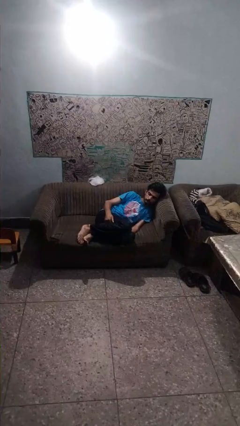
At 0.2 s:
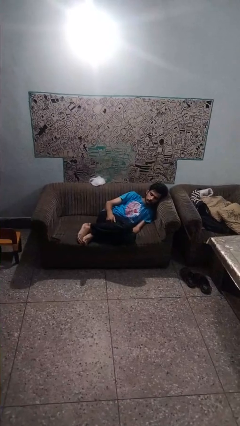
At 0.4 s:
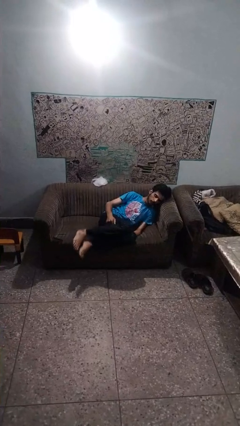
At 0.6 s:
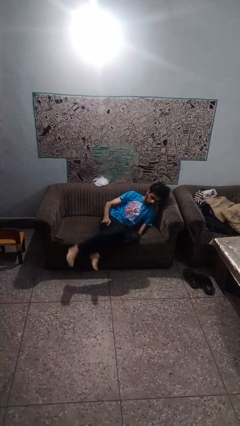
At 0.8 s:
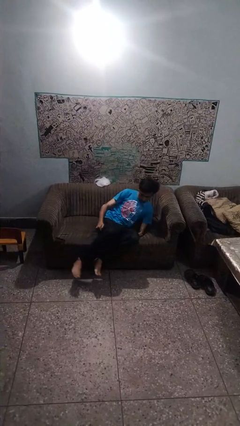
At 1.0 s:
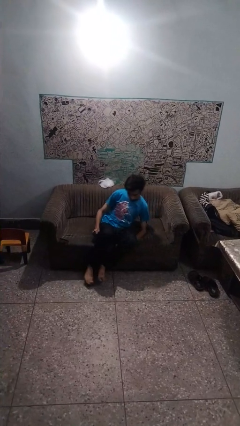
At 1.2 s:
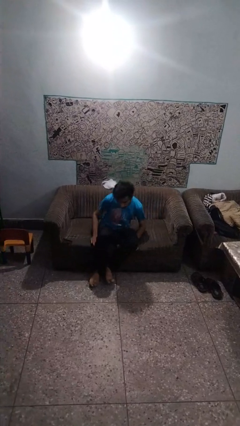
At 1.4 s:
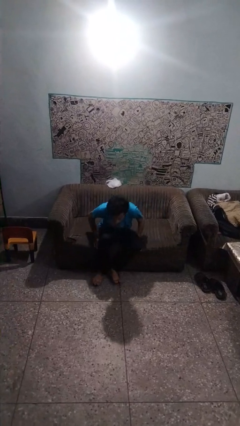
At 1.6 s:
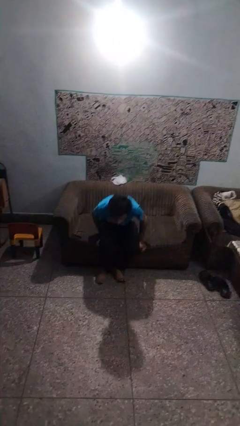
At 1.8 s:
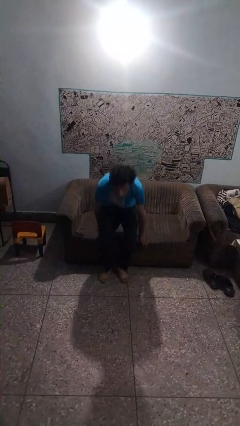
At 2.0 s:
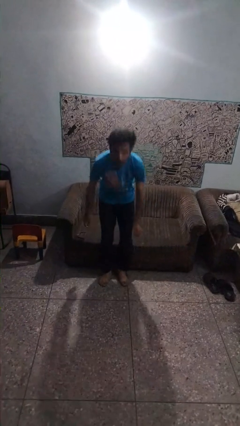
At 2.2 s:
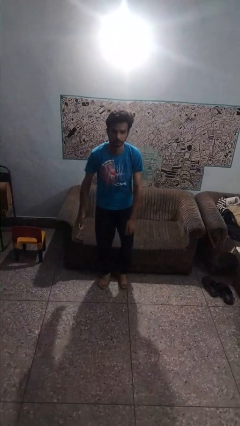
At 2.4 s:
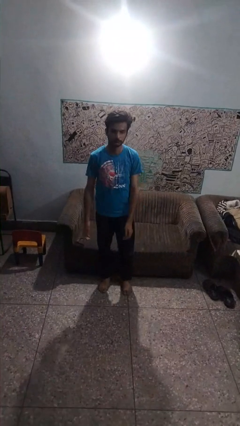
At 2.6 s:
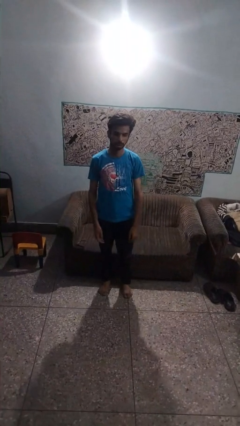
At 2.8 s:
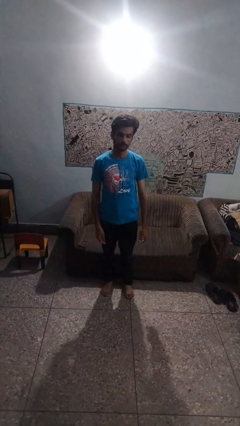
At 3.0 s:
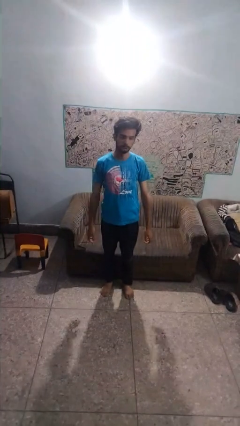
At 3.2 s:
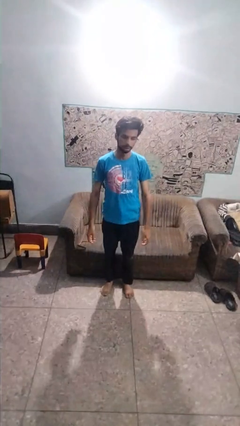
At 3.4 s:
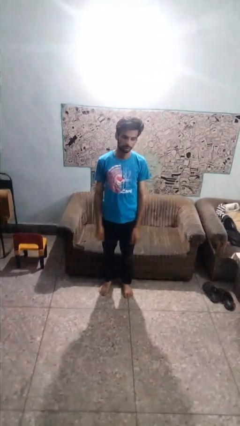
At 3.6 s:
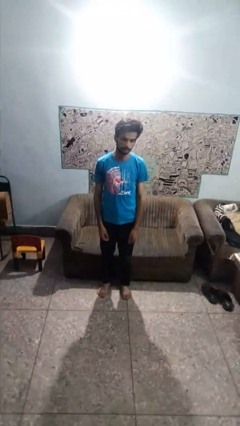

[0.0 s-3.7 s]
person stands up

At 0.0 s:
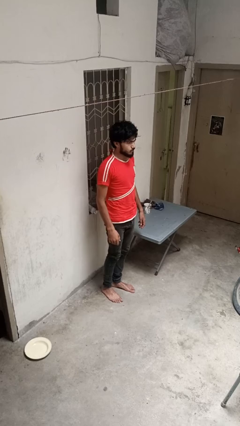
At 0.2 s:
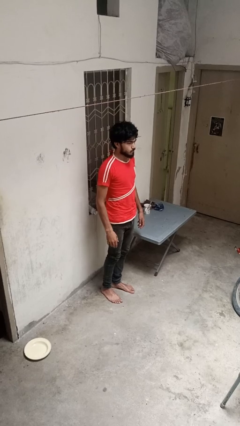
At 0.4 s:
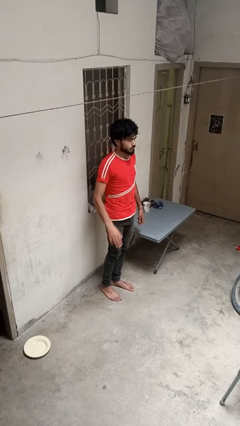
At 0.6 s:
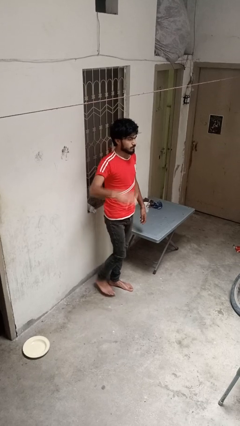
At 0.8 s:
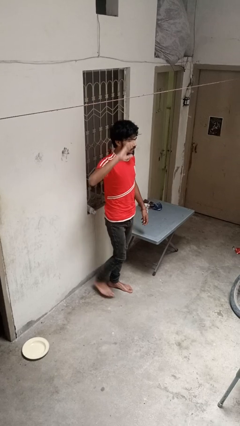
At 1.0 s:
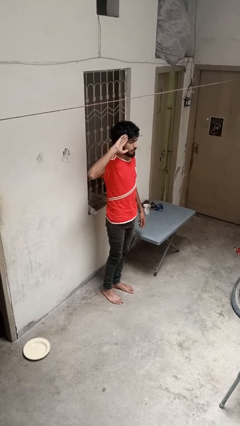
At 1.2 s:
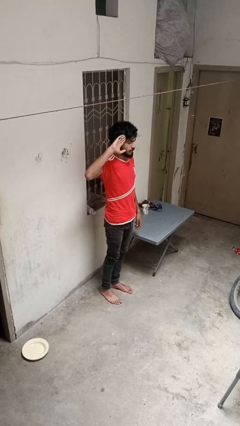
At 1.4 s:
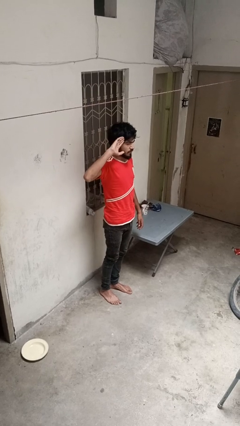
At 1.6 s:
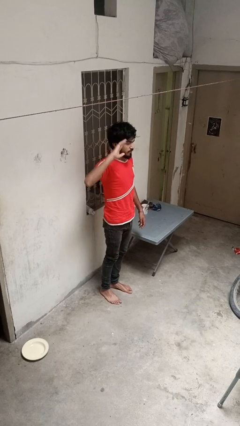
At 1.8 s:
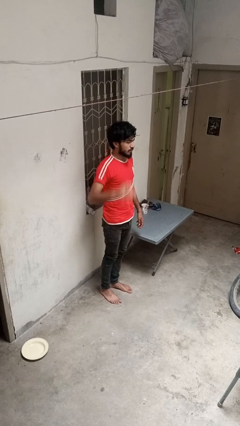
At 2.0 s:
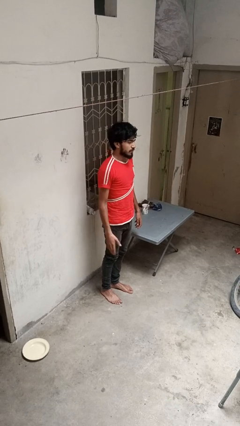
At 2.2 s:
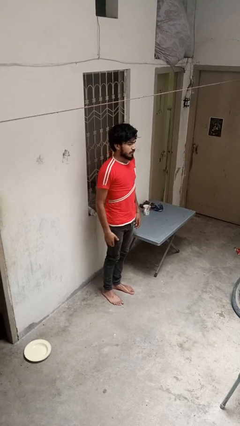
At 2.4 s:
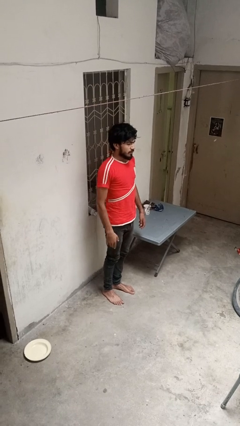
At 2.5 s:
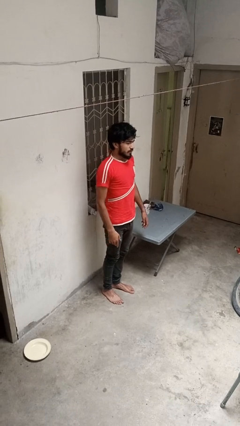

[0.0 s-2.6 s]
person salutes

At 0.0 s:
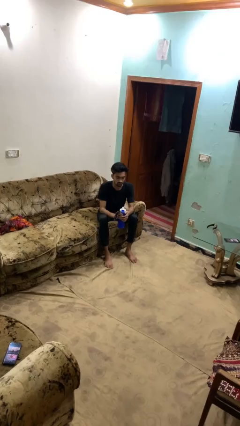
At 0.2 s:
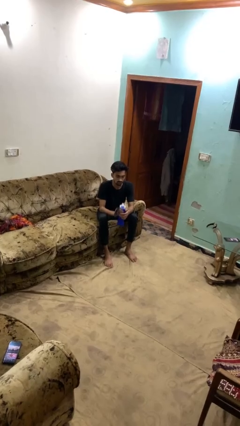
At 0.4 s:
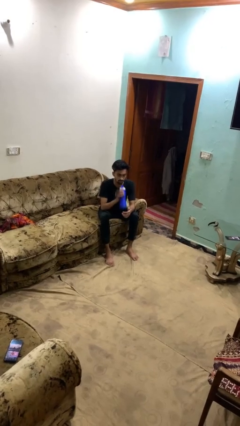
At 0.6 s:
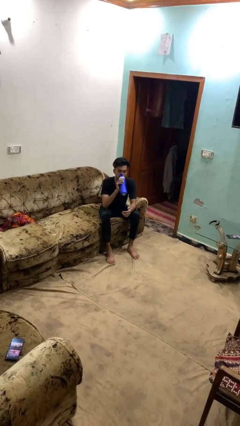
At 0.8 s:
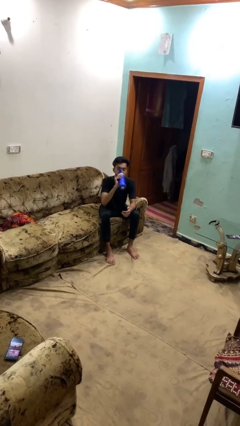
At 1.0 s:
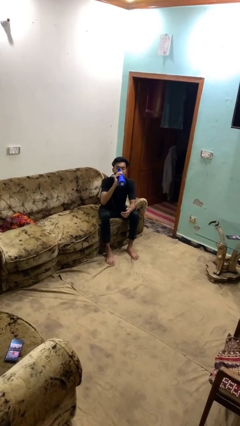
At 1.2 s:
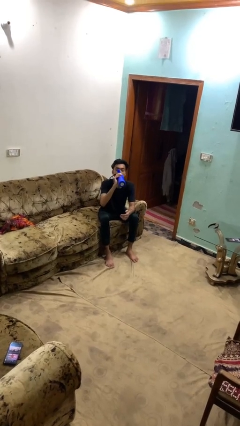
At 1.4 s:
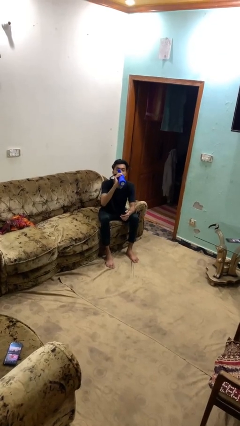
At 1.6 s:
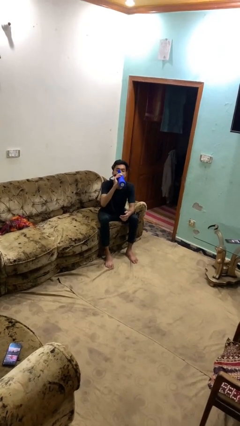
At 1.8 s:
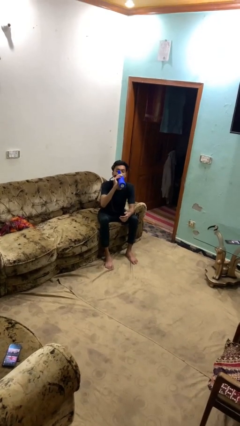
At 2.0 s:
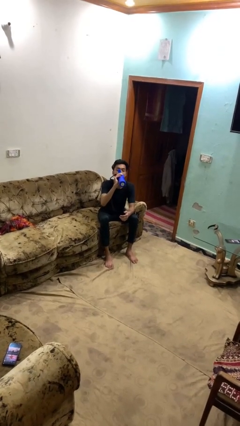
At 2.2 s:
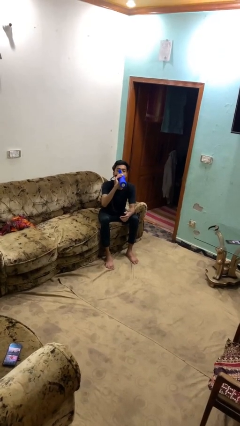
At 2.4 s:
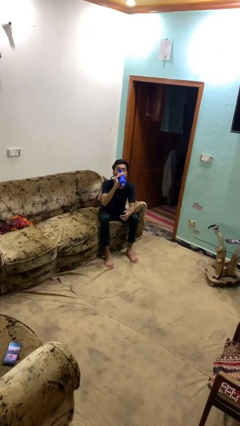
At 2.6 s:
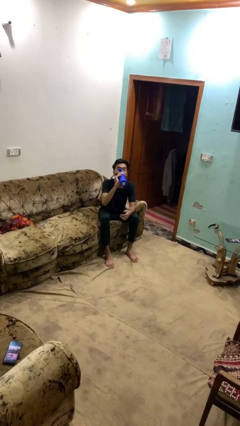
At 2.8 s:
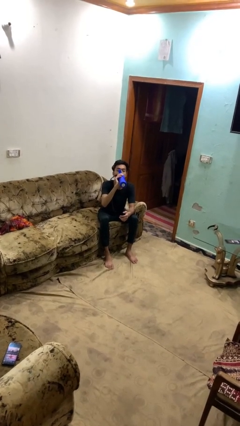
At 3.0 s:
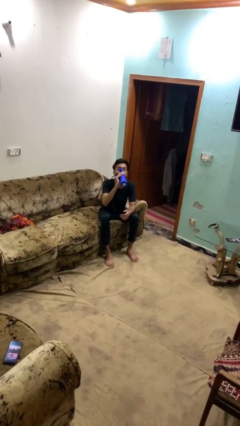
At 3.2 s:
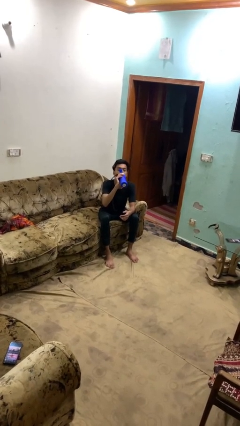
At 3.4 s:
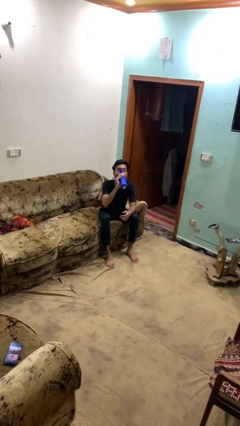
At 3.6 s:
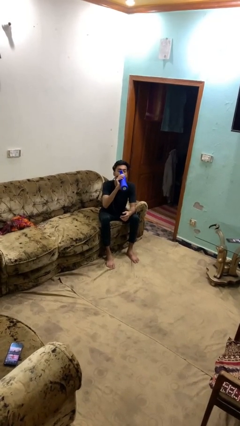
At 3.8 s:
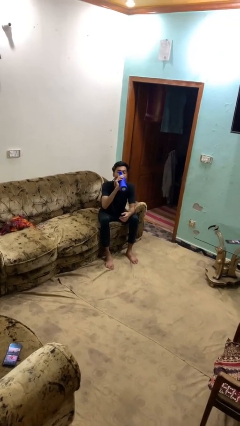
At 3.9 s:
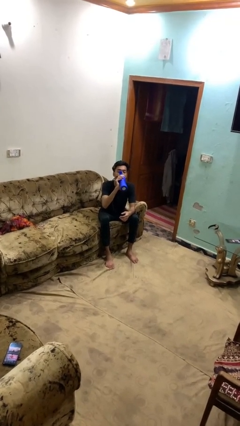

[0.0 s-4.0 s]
person drinks from bottle

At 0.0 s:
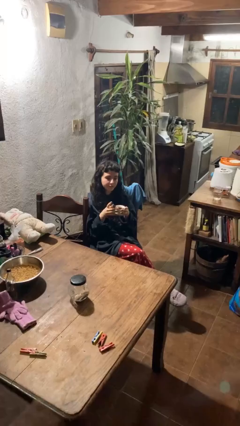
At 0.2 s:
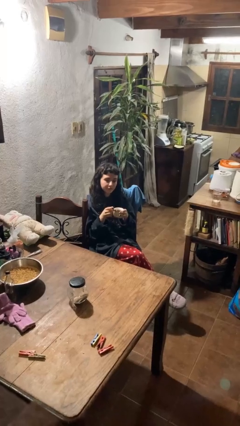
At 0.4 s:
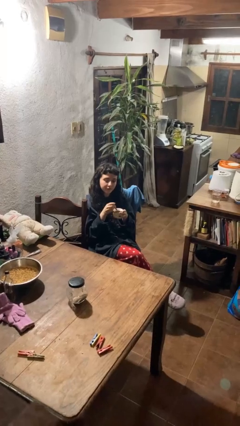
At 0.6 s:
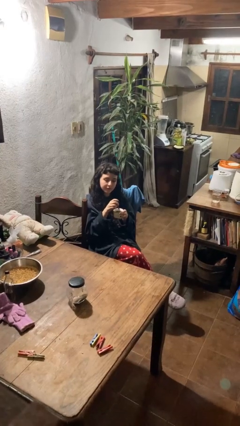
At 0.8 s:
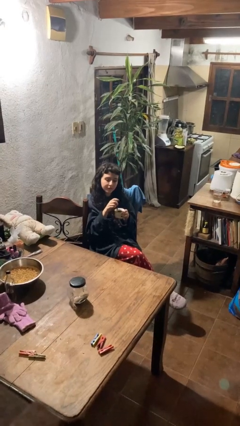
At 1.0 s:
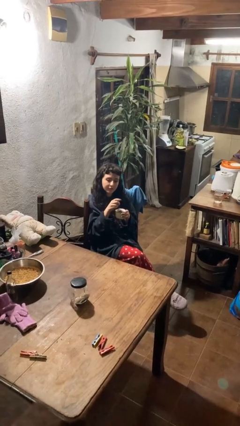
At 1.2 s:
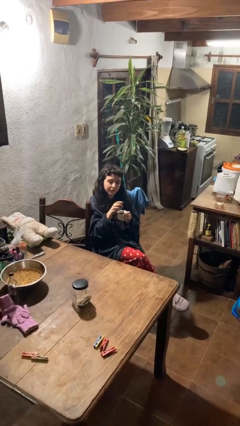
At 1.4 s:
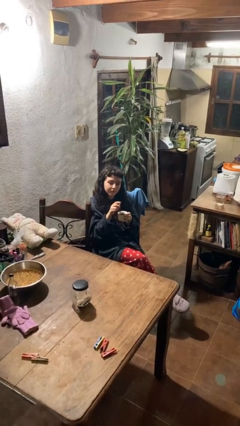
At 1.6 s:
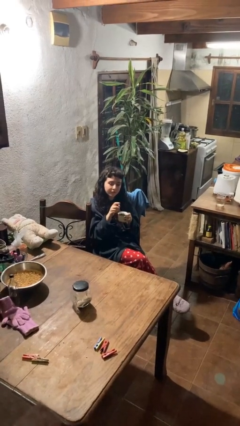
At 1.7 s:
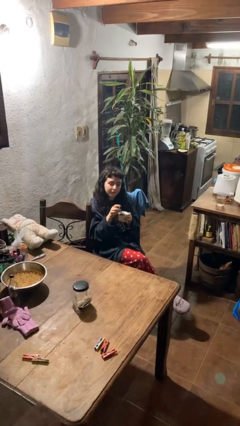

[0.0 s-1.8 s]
person stirs mug

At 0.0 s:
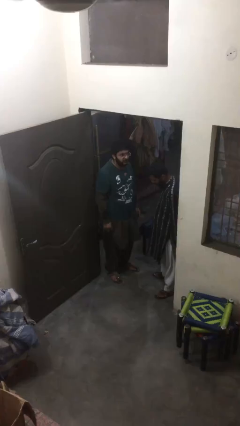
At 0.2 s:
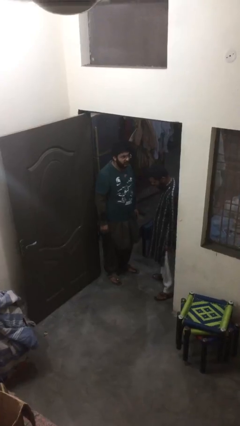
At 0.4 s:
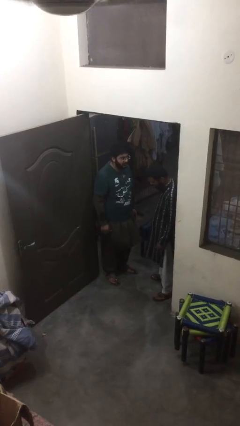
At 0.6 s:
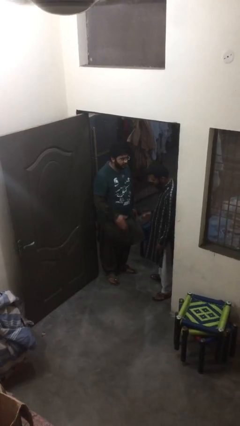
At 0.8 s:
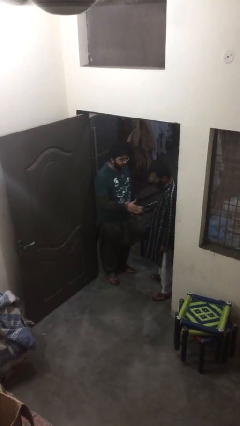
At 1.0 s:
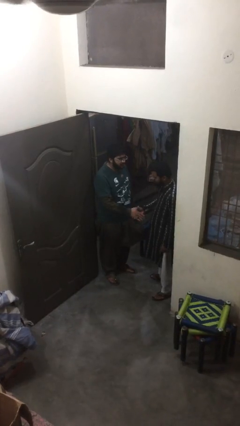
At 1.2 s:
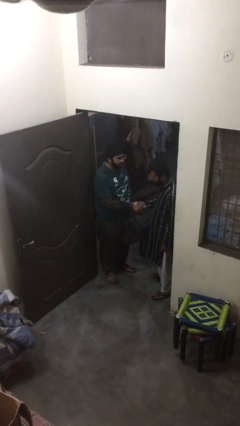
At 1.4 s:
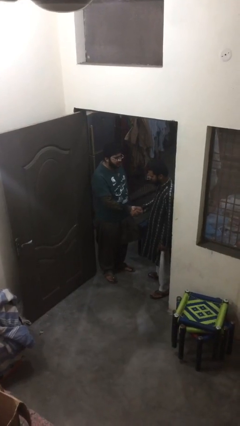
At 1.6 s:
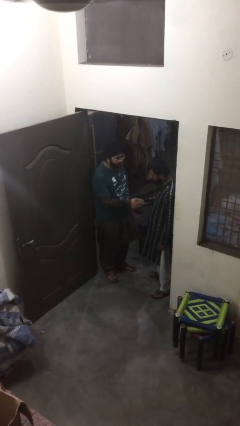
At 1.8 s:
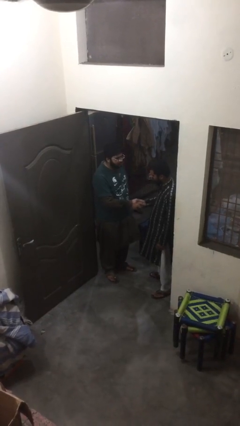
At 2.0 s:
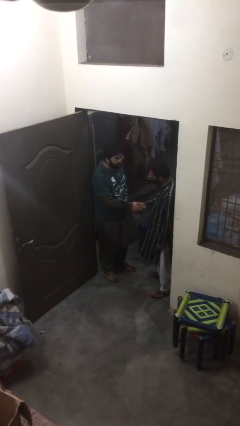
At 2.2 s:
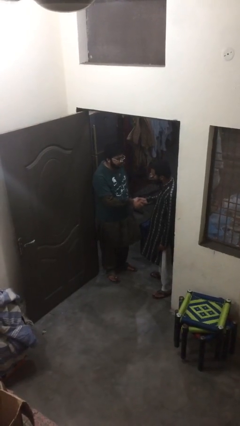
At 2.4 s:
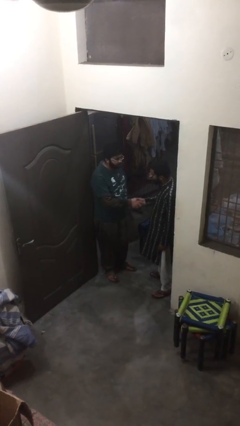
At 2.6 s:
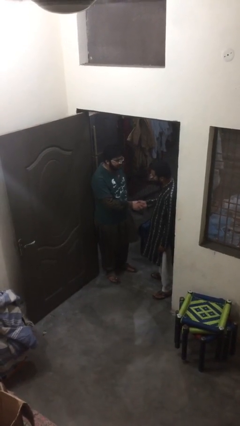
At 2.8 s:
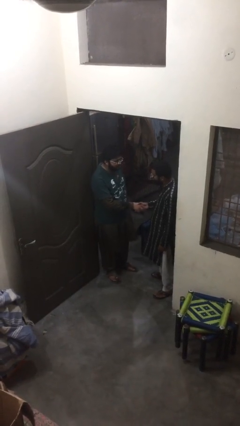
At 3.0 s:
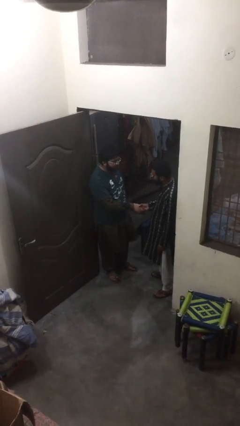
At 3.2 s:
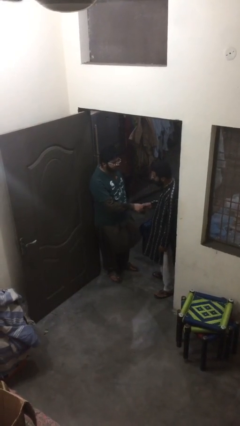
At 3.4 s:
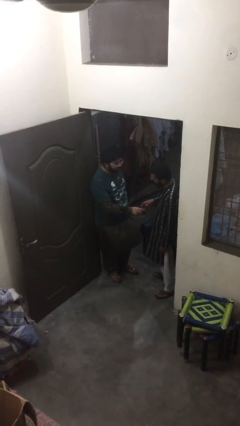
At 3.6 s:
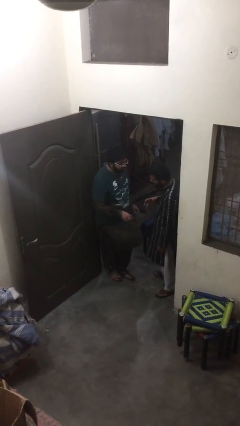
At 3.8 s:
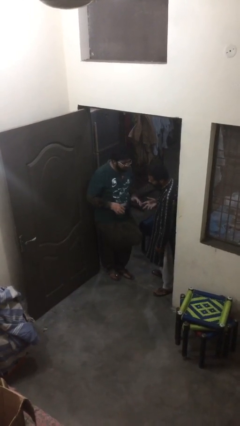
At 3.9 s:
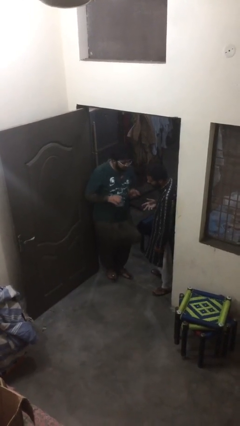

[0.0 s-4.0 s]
person shakes hand

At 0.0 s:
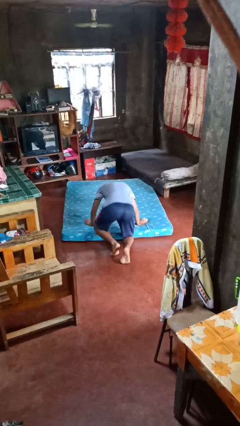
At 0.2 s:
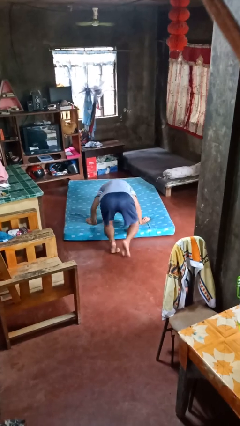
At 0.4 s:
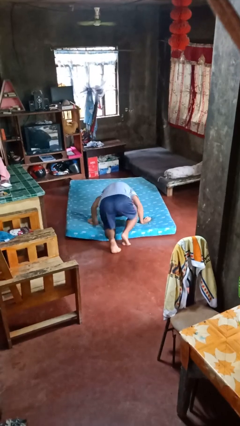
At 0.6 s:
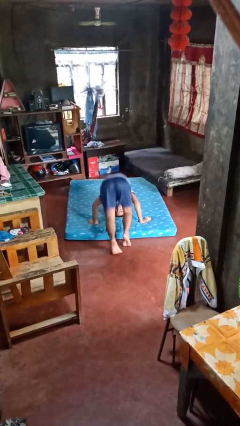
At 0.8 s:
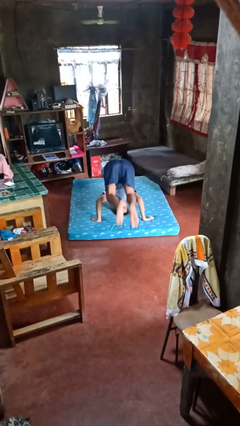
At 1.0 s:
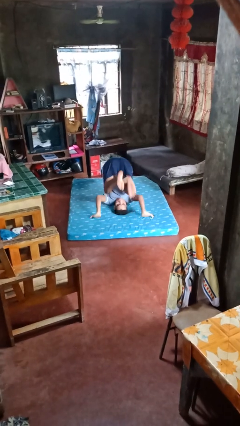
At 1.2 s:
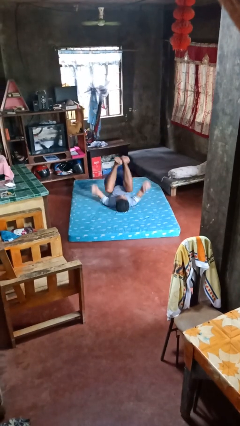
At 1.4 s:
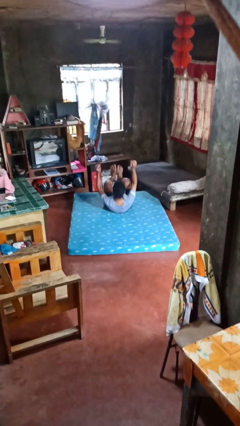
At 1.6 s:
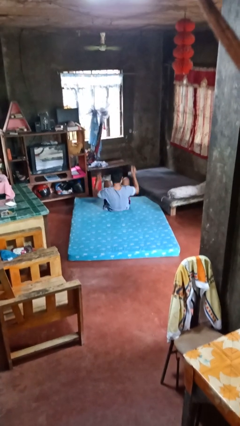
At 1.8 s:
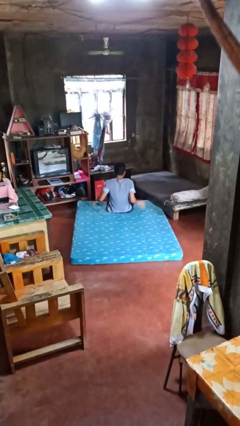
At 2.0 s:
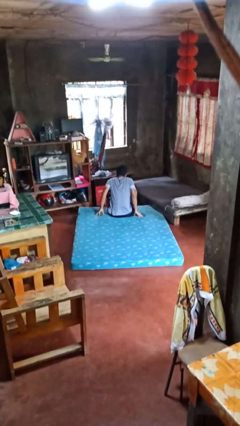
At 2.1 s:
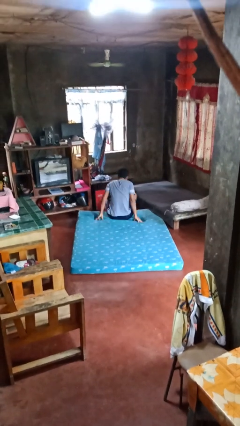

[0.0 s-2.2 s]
person somersaults
